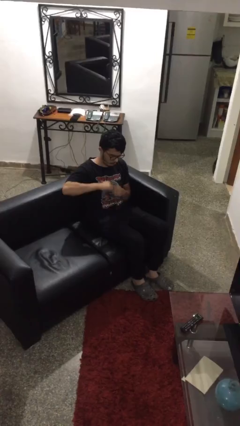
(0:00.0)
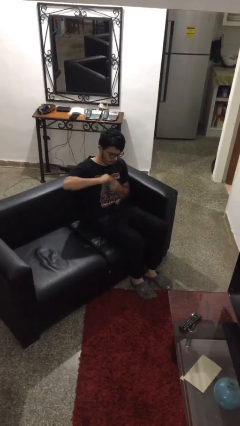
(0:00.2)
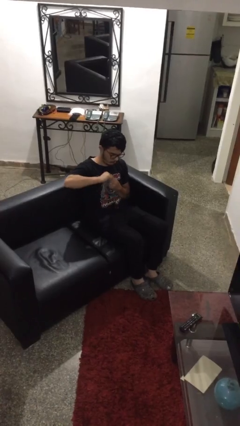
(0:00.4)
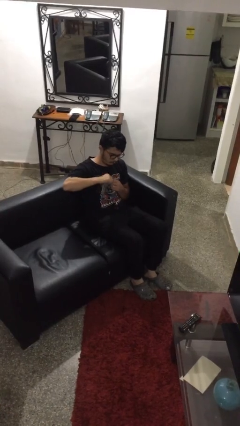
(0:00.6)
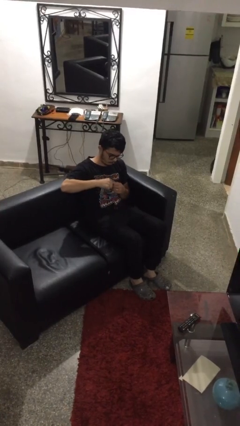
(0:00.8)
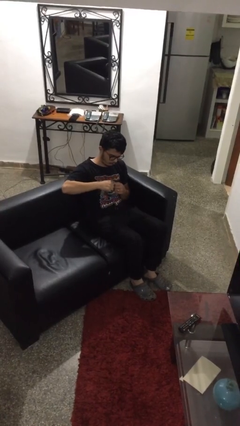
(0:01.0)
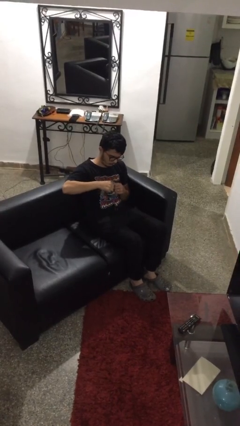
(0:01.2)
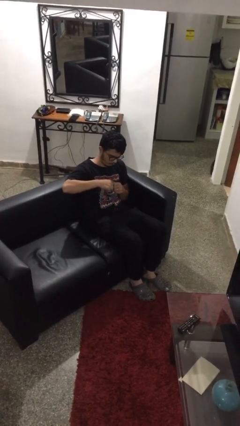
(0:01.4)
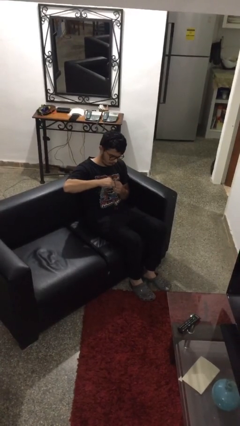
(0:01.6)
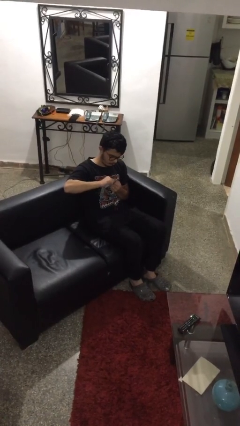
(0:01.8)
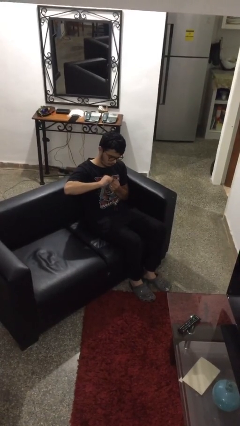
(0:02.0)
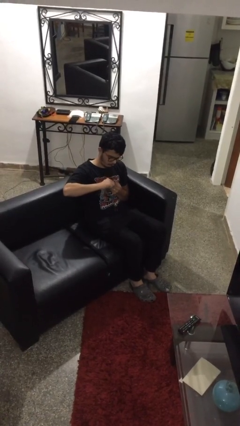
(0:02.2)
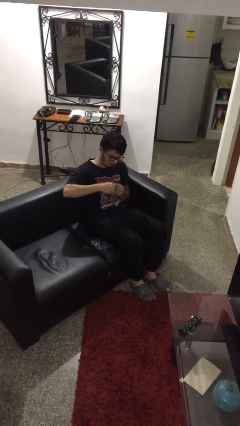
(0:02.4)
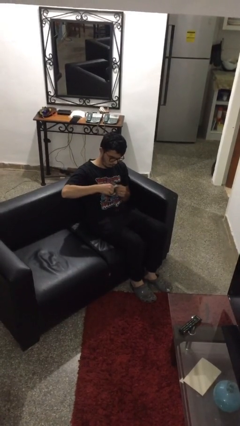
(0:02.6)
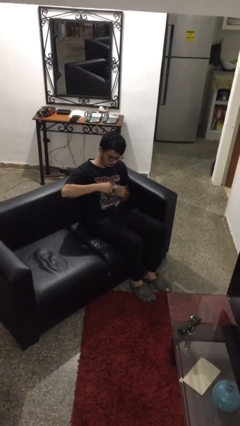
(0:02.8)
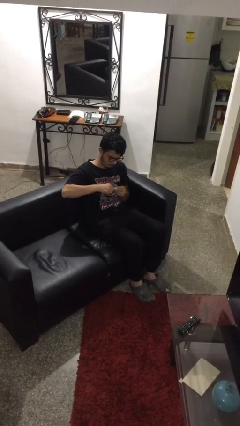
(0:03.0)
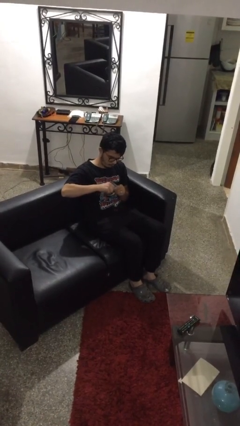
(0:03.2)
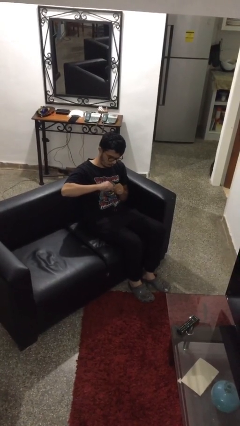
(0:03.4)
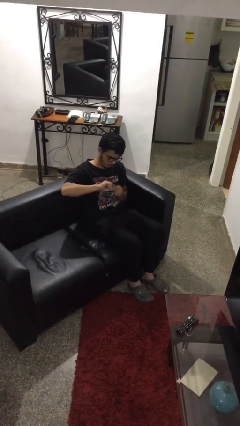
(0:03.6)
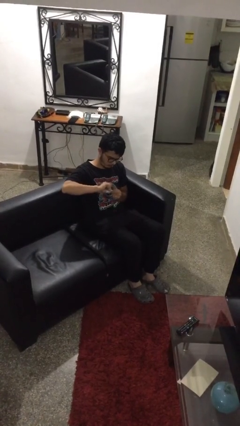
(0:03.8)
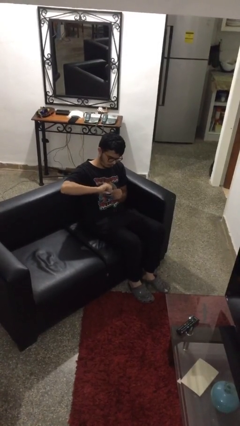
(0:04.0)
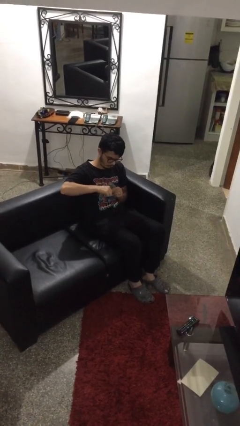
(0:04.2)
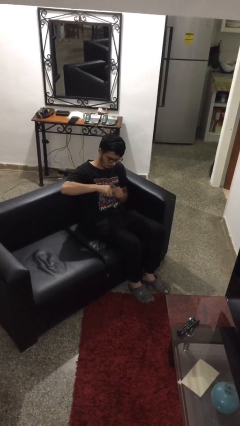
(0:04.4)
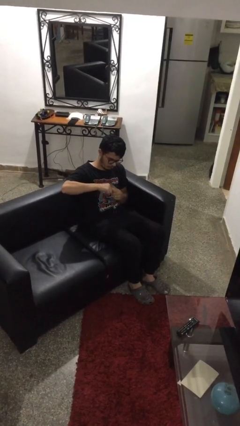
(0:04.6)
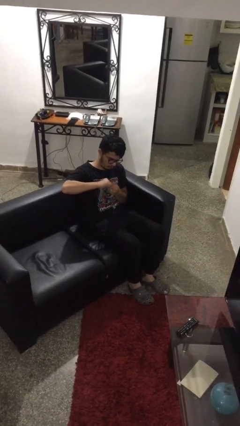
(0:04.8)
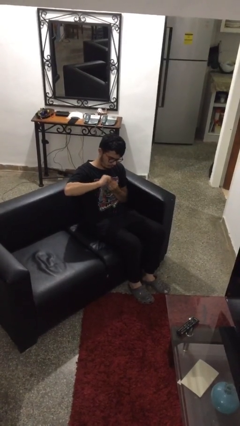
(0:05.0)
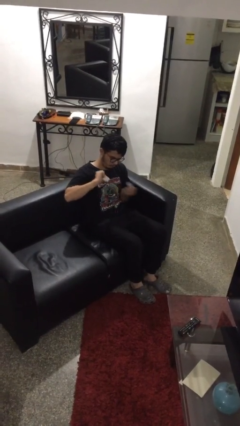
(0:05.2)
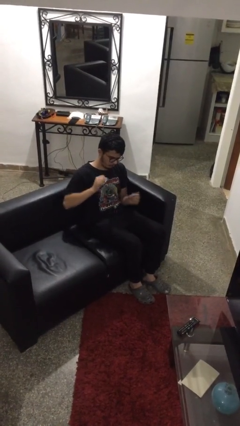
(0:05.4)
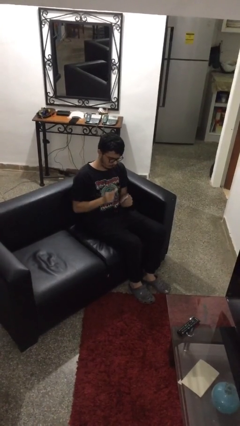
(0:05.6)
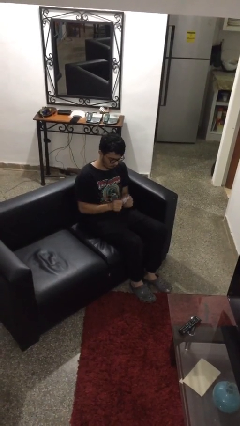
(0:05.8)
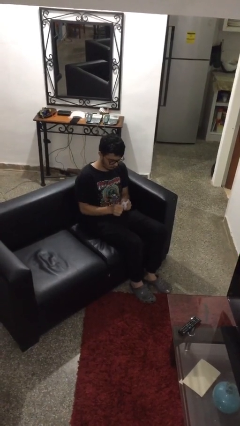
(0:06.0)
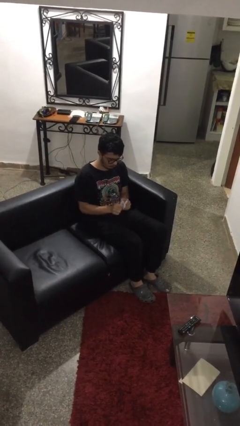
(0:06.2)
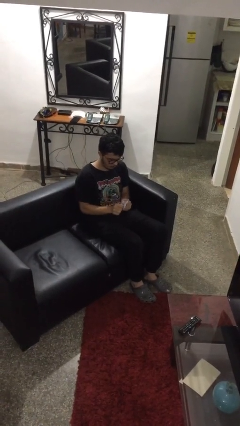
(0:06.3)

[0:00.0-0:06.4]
person tears paper

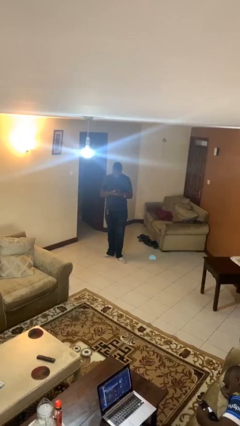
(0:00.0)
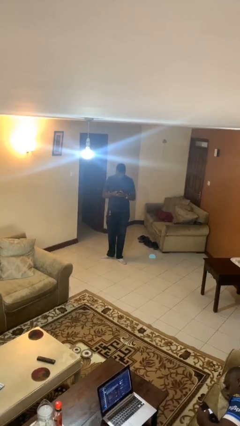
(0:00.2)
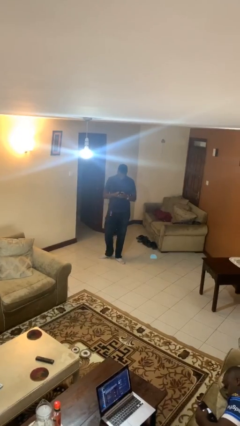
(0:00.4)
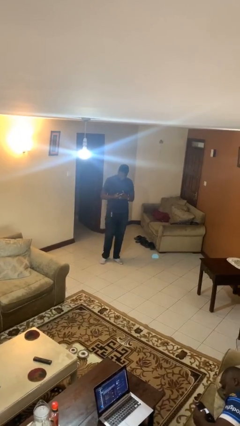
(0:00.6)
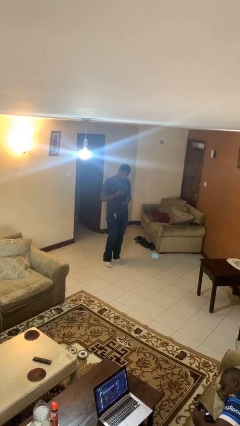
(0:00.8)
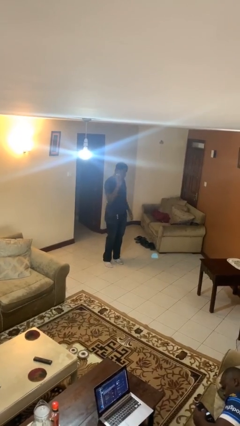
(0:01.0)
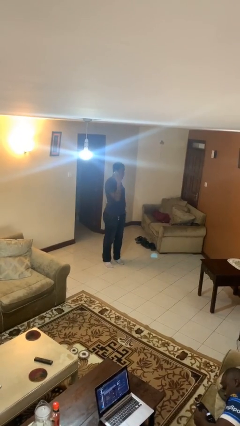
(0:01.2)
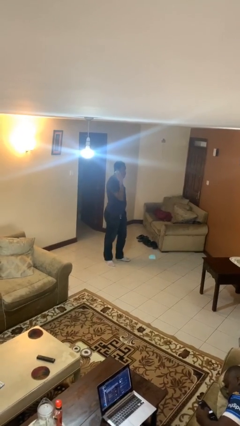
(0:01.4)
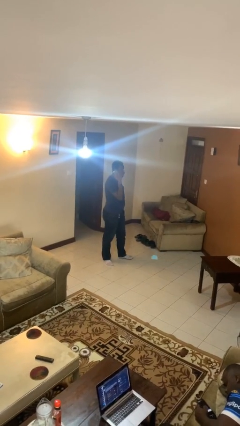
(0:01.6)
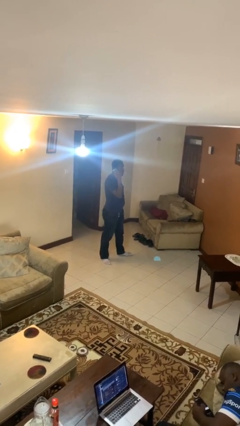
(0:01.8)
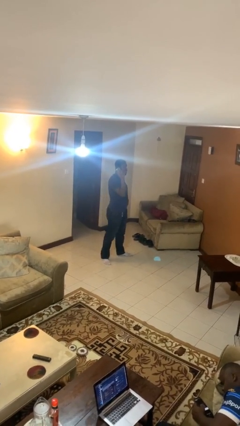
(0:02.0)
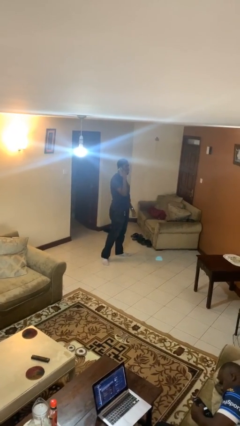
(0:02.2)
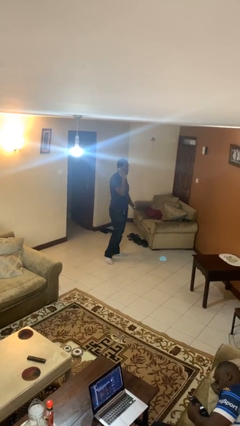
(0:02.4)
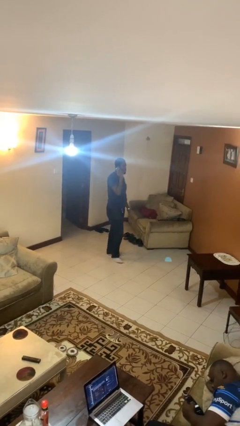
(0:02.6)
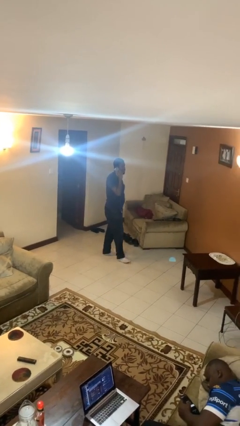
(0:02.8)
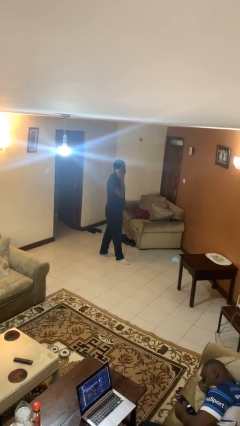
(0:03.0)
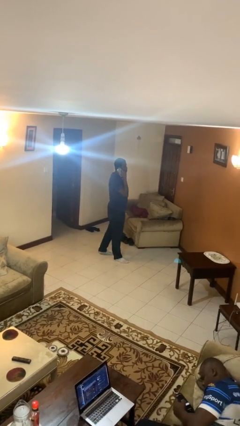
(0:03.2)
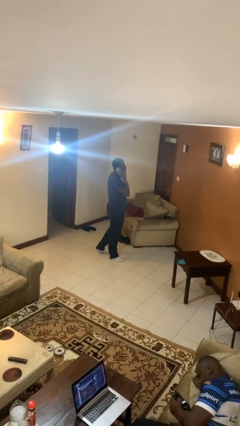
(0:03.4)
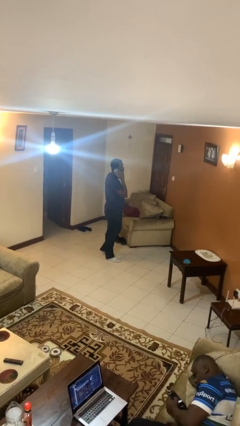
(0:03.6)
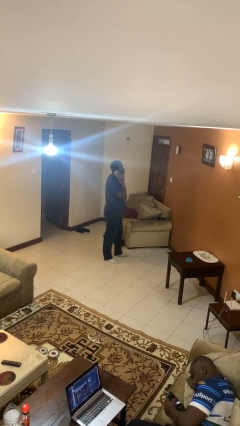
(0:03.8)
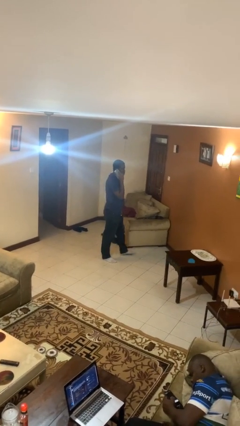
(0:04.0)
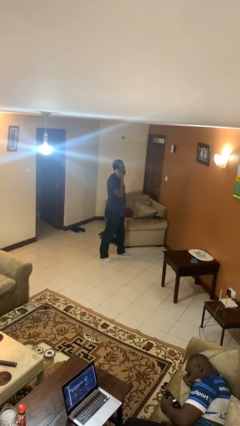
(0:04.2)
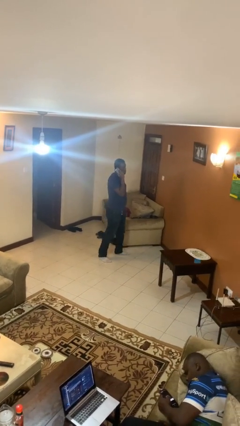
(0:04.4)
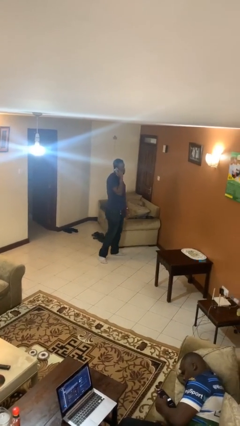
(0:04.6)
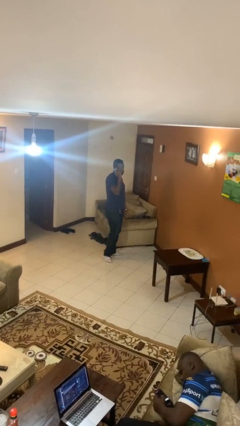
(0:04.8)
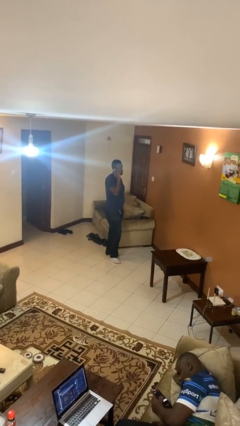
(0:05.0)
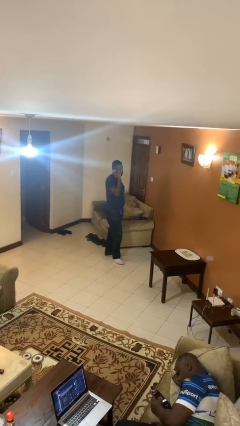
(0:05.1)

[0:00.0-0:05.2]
person talks on phone

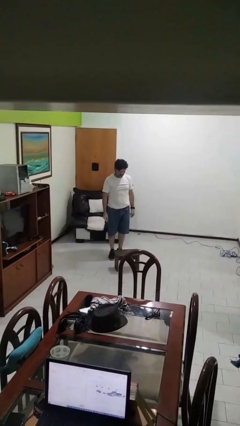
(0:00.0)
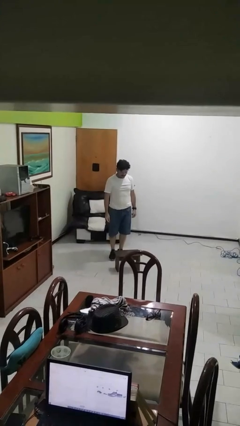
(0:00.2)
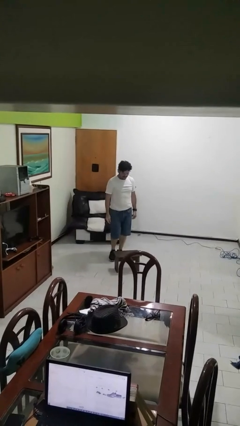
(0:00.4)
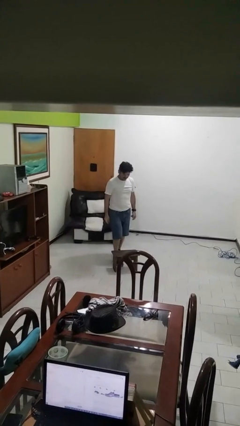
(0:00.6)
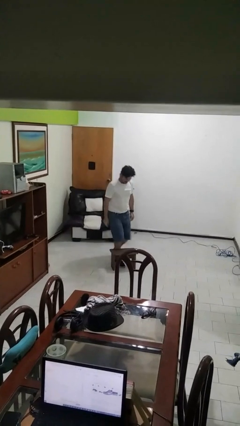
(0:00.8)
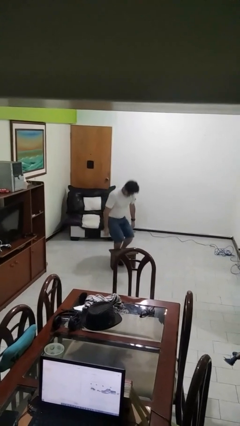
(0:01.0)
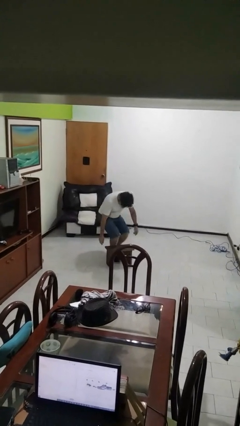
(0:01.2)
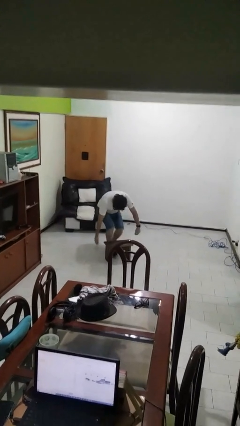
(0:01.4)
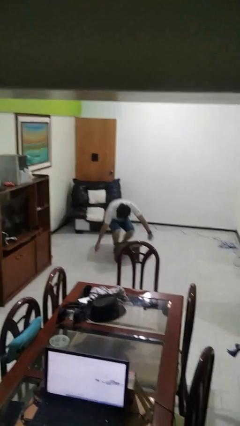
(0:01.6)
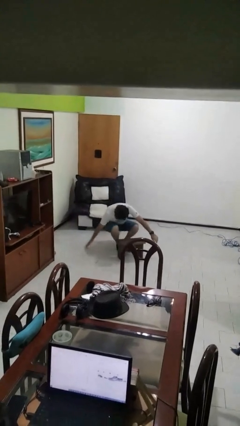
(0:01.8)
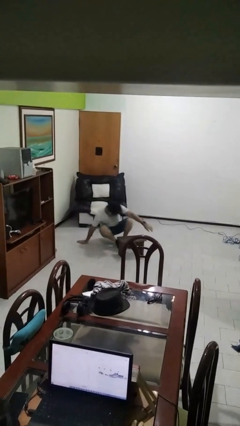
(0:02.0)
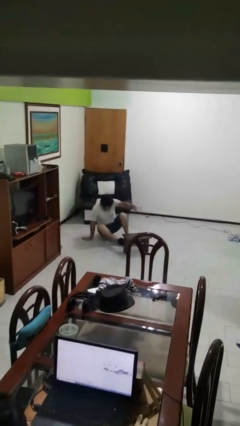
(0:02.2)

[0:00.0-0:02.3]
person trips on object on floor

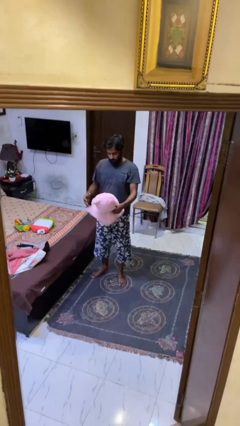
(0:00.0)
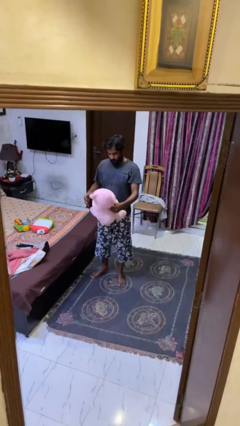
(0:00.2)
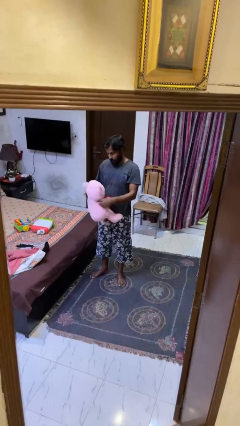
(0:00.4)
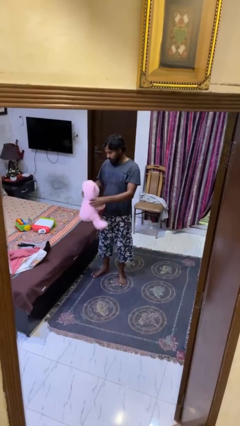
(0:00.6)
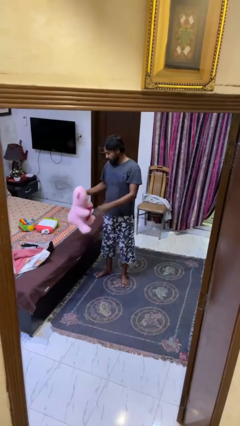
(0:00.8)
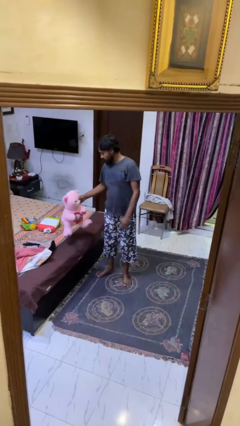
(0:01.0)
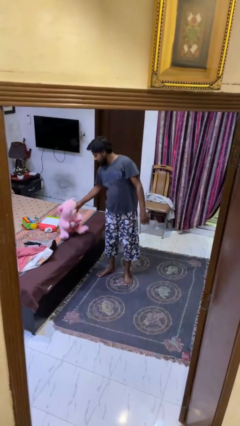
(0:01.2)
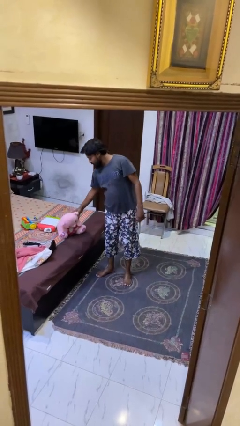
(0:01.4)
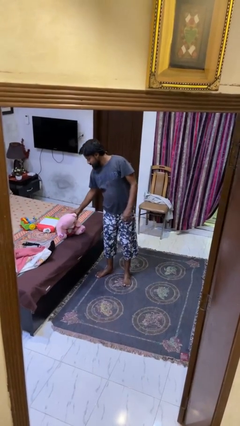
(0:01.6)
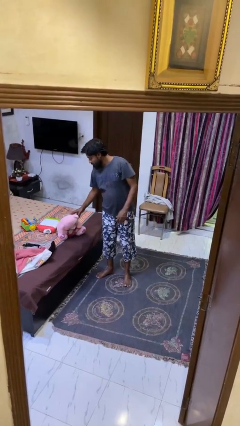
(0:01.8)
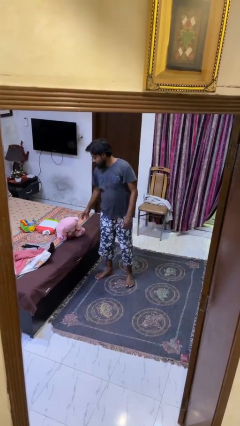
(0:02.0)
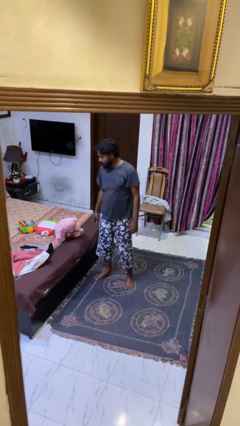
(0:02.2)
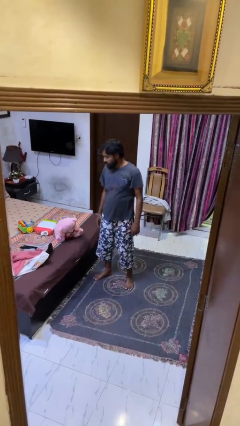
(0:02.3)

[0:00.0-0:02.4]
person puts down object on bed

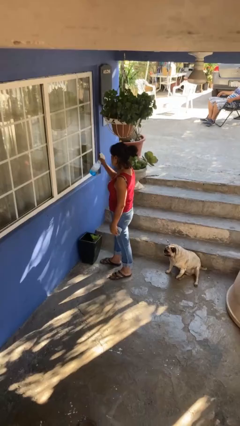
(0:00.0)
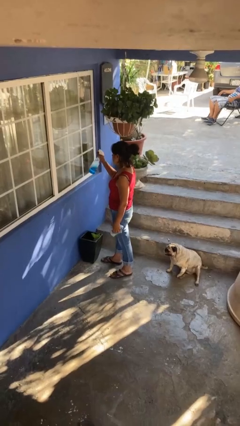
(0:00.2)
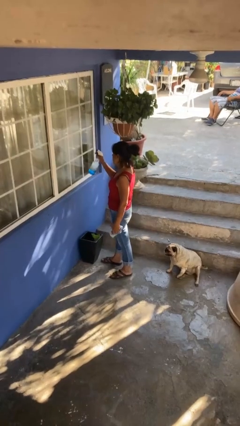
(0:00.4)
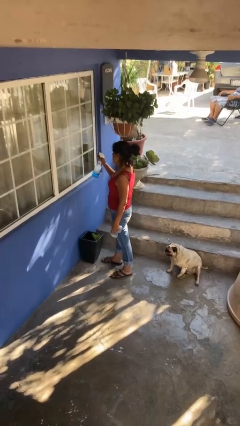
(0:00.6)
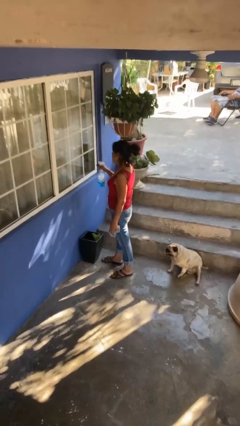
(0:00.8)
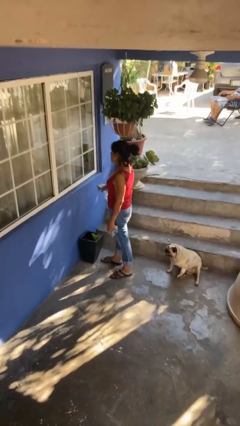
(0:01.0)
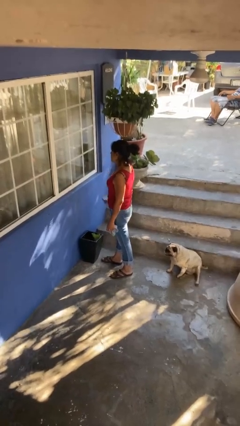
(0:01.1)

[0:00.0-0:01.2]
person sprays from bottle

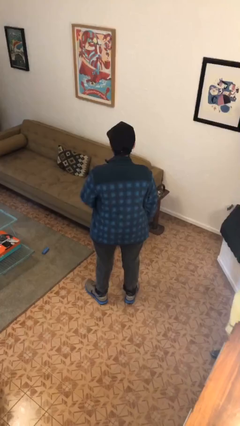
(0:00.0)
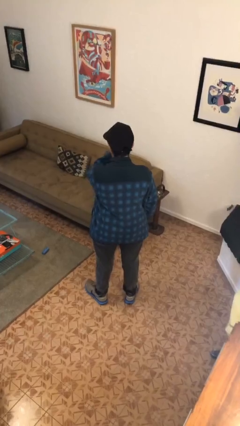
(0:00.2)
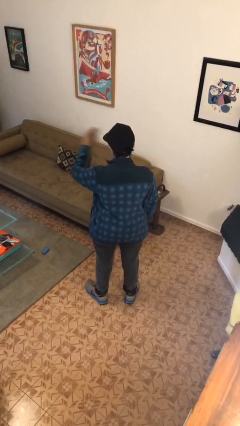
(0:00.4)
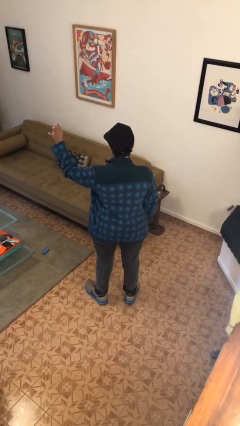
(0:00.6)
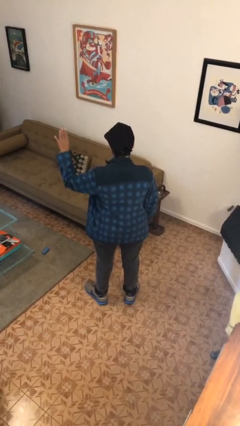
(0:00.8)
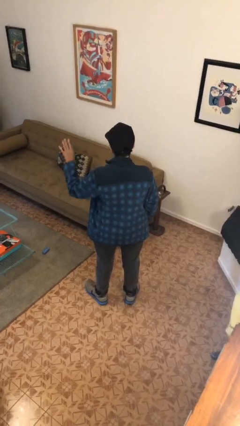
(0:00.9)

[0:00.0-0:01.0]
person gestures swipe left
